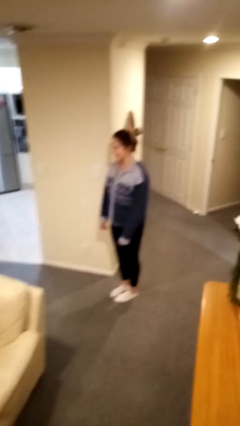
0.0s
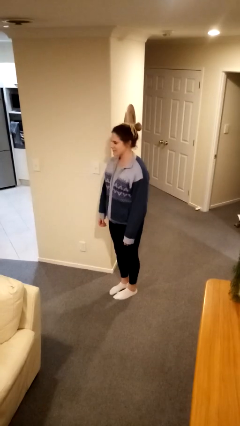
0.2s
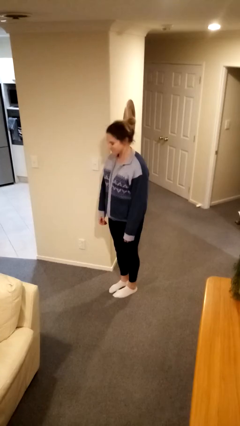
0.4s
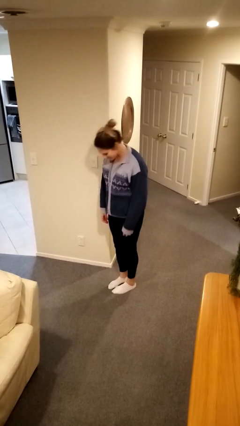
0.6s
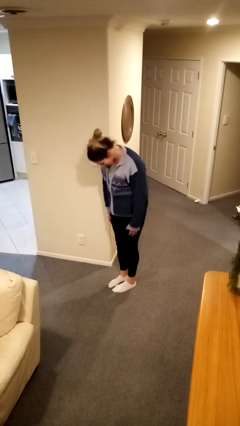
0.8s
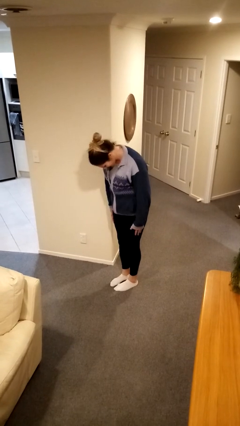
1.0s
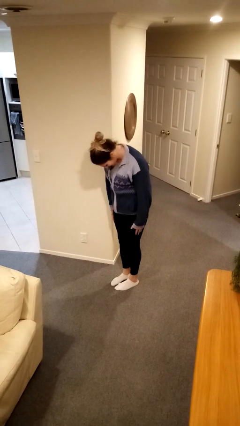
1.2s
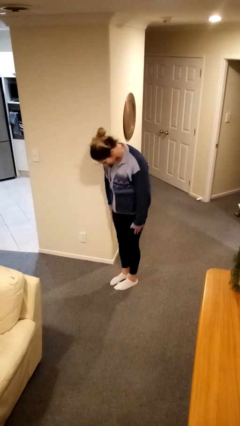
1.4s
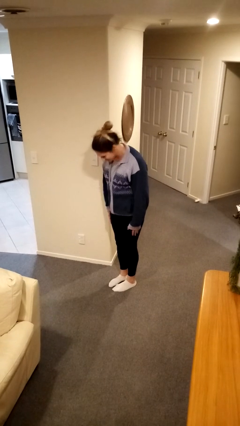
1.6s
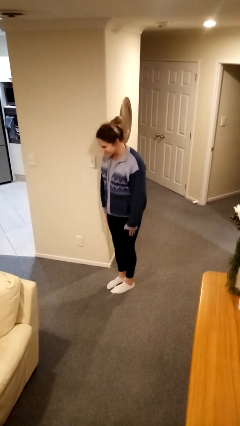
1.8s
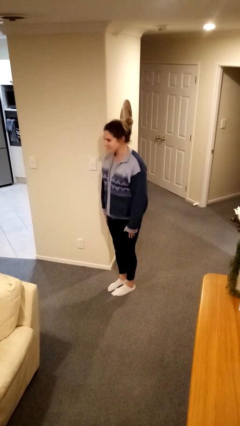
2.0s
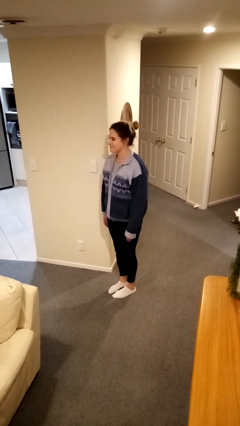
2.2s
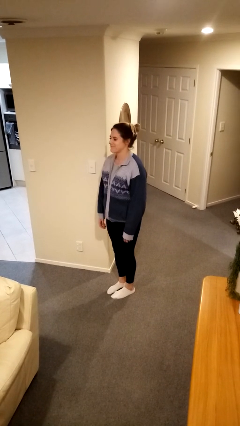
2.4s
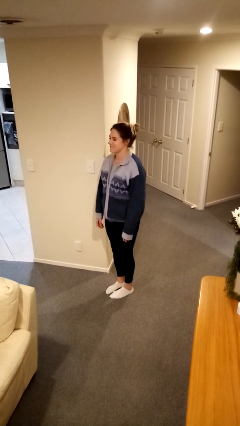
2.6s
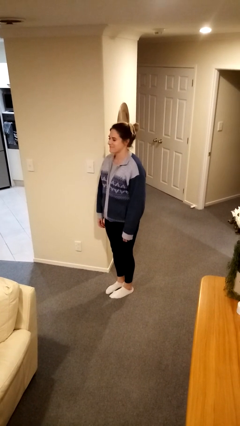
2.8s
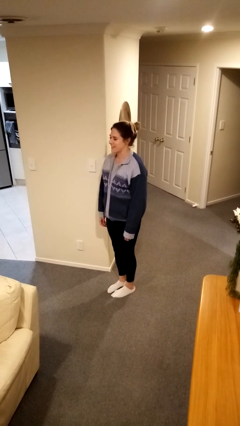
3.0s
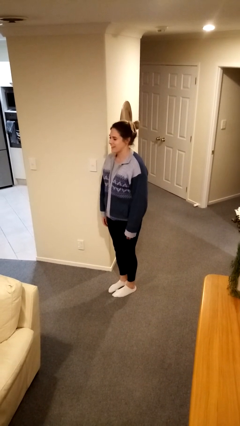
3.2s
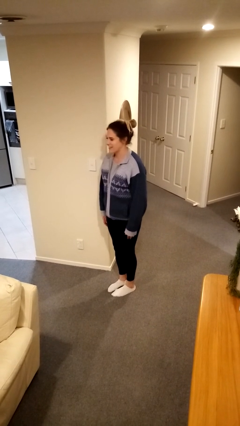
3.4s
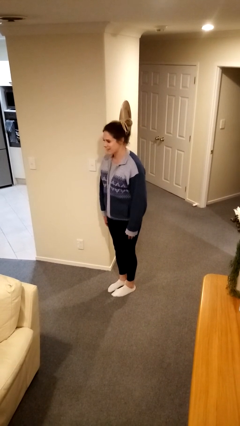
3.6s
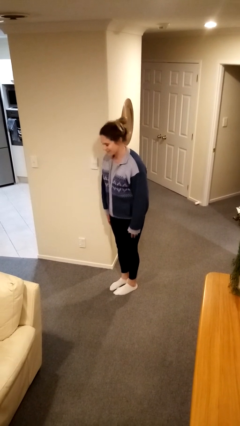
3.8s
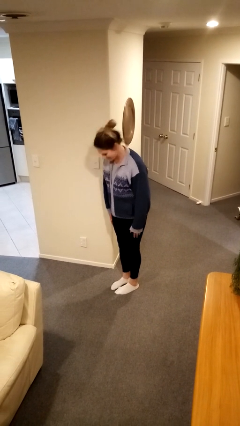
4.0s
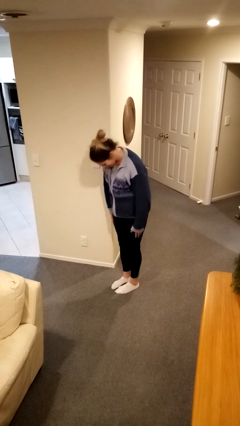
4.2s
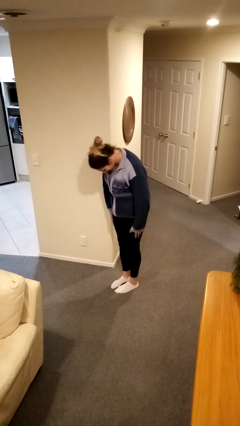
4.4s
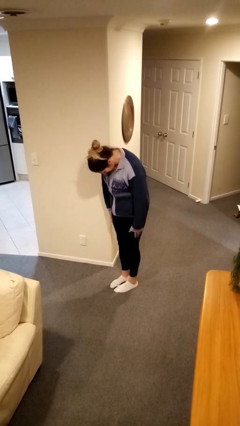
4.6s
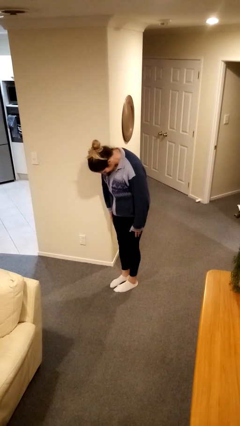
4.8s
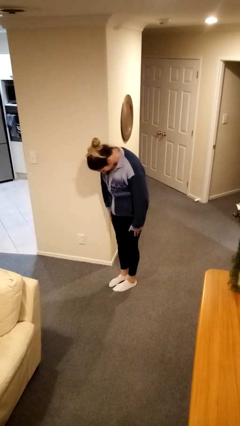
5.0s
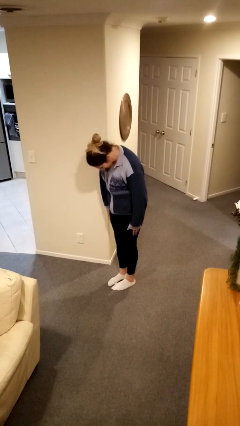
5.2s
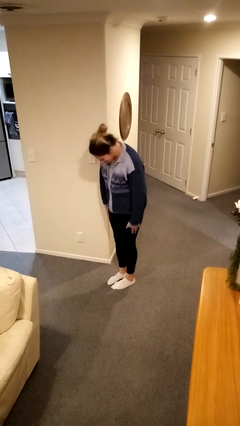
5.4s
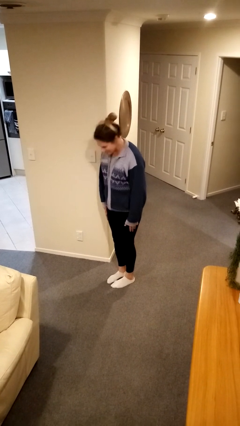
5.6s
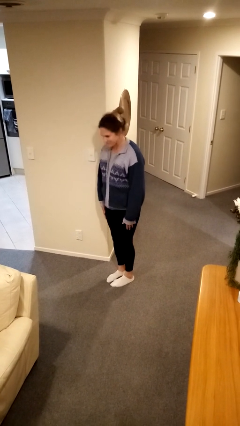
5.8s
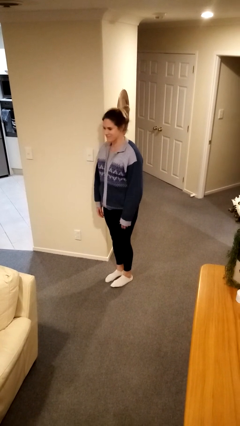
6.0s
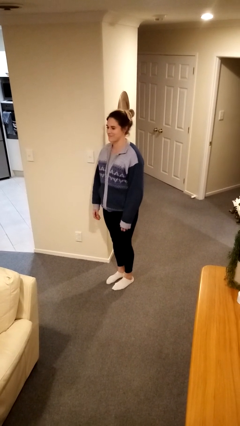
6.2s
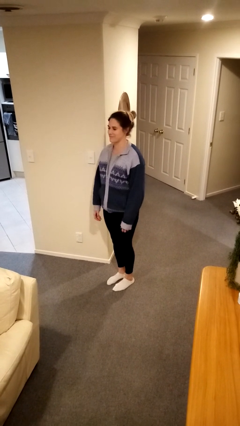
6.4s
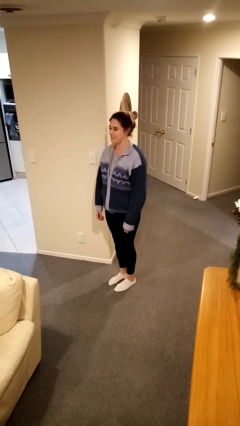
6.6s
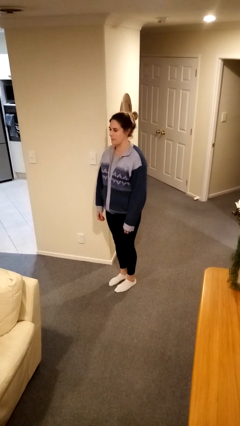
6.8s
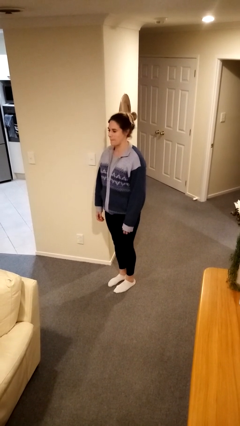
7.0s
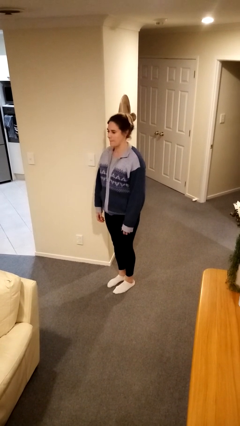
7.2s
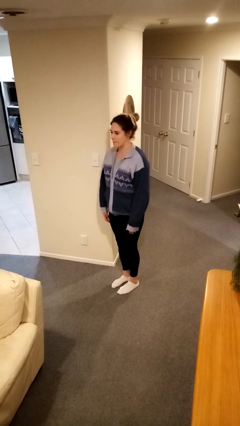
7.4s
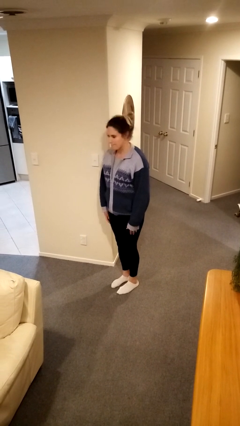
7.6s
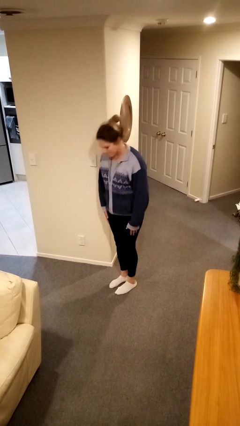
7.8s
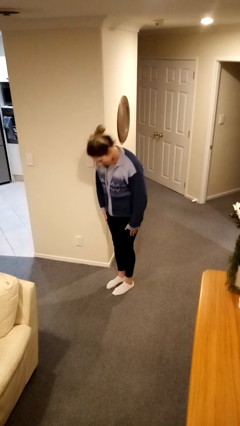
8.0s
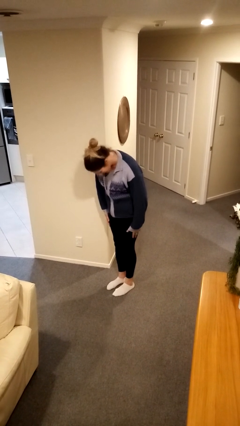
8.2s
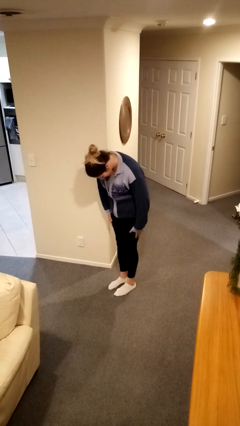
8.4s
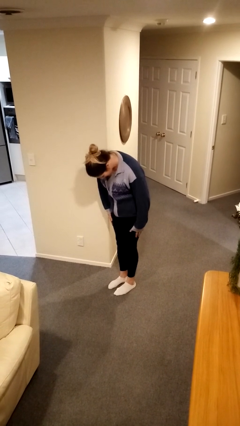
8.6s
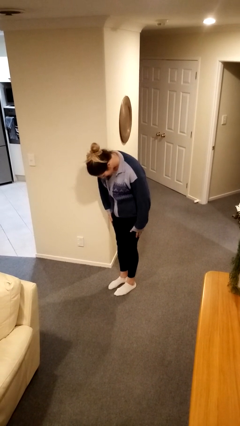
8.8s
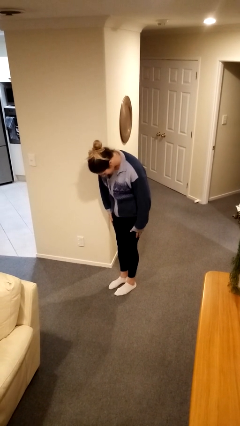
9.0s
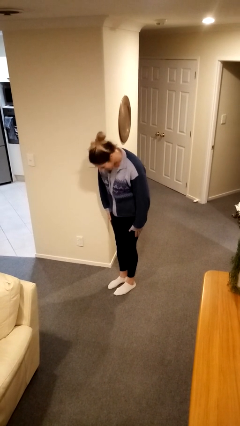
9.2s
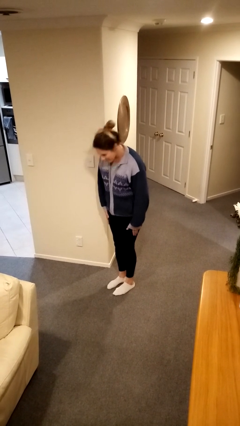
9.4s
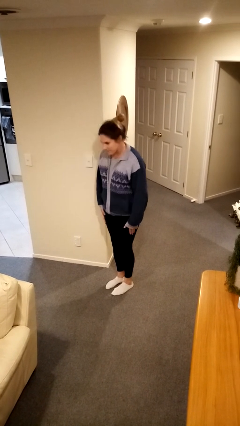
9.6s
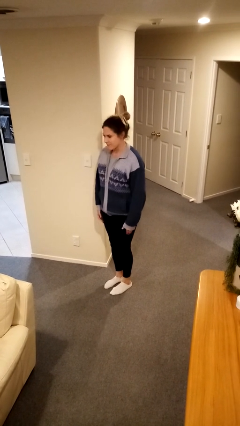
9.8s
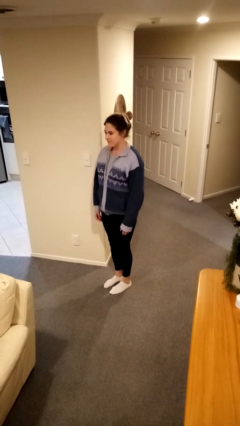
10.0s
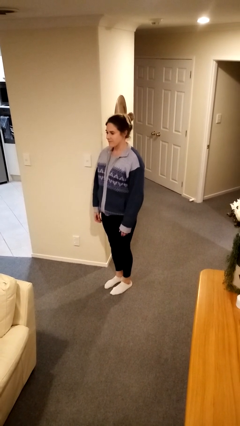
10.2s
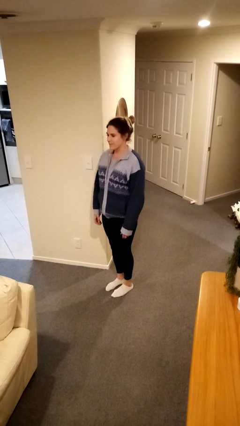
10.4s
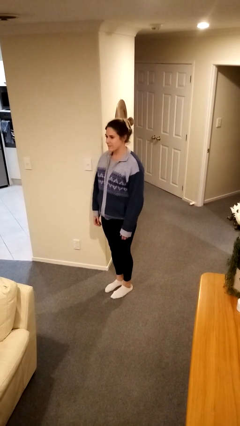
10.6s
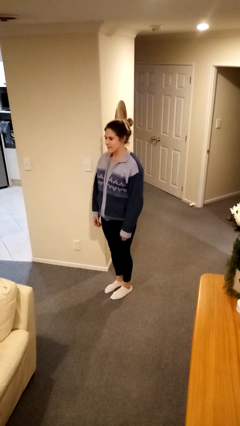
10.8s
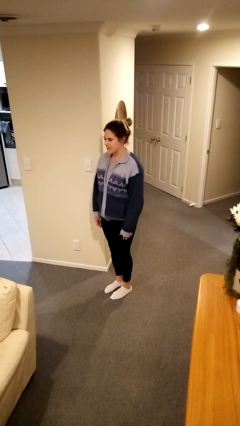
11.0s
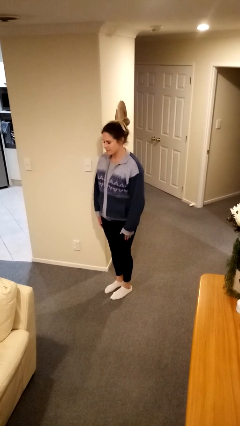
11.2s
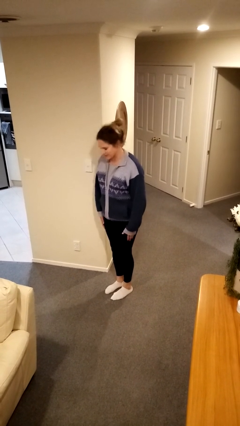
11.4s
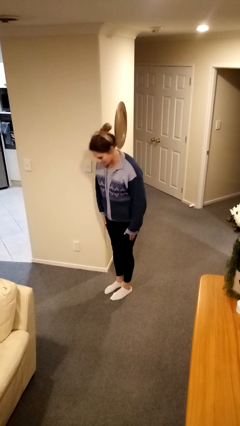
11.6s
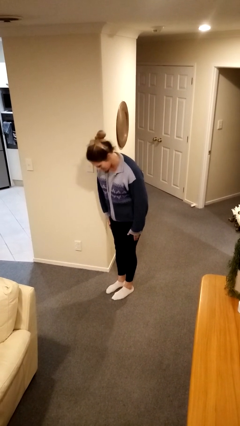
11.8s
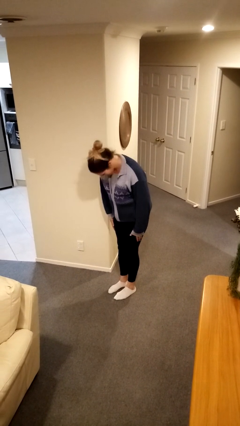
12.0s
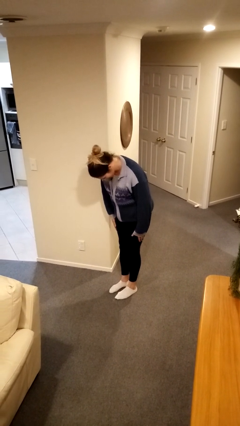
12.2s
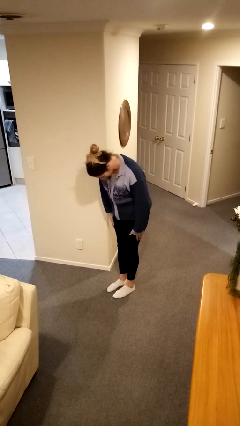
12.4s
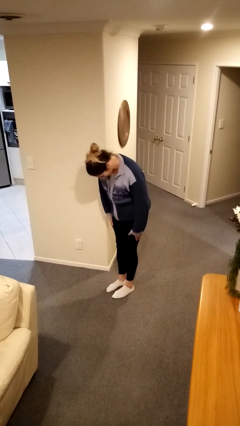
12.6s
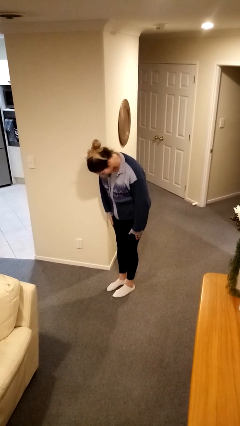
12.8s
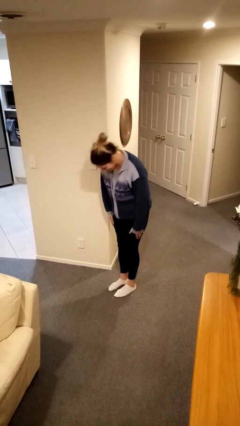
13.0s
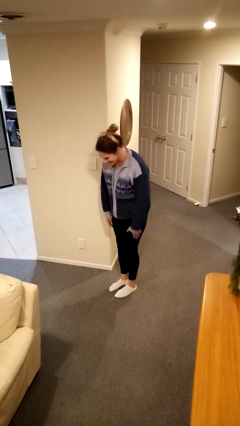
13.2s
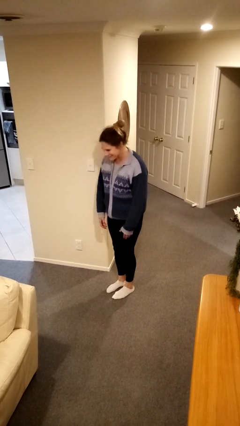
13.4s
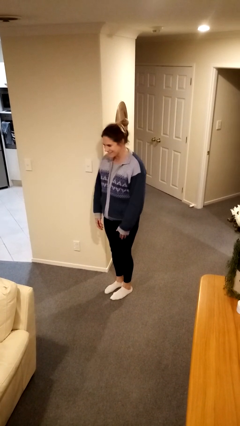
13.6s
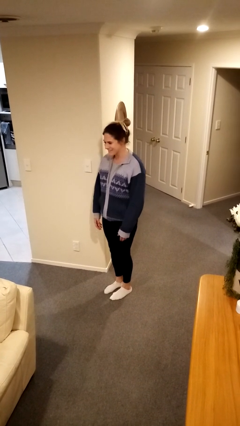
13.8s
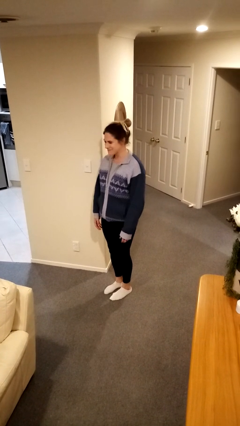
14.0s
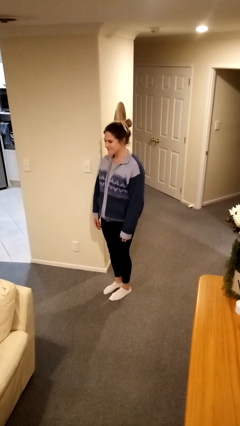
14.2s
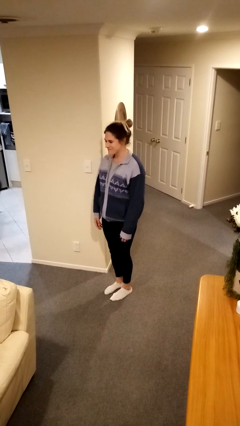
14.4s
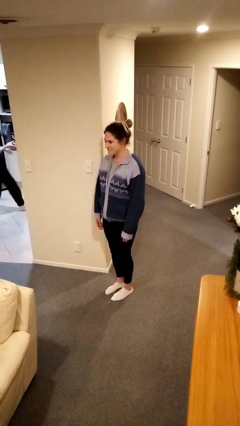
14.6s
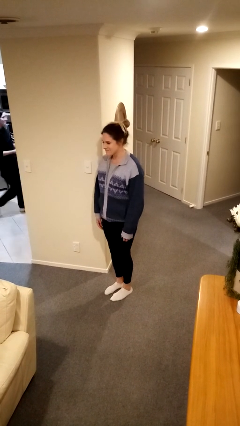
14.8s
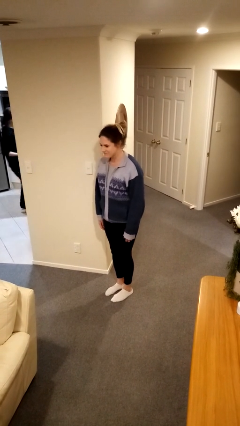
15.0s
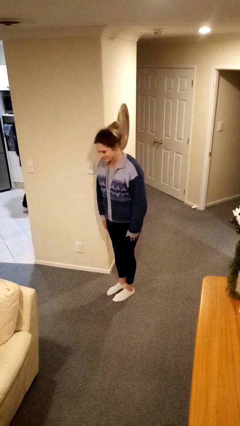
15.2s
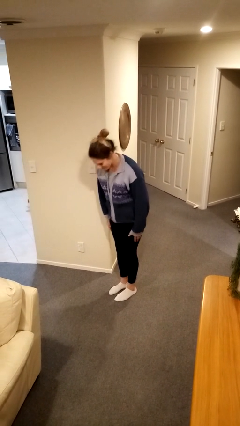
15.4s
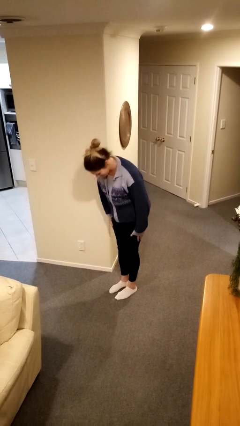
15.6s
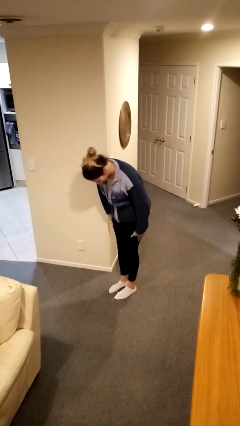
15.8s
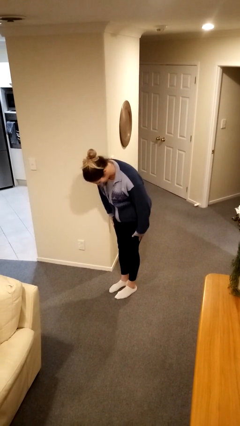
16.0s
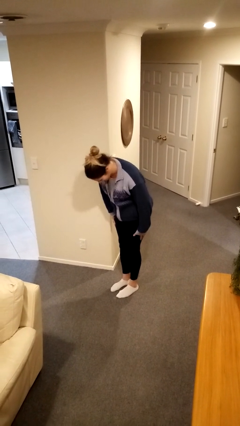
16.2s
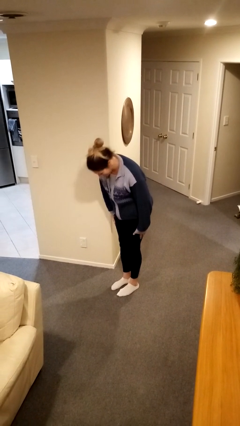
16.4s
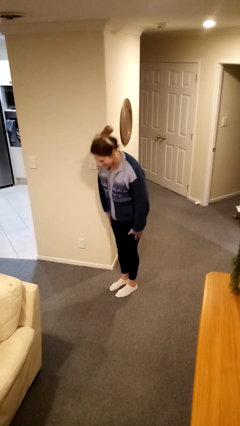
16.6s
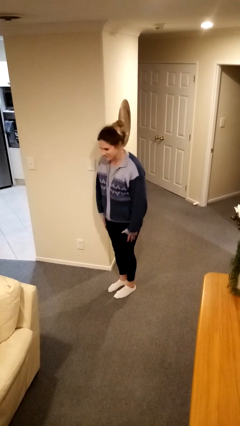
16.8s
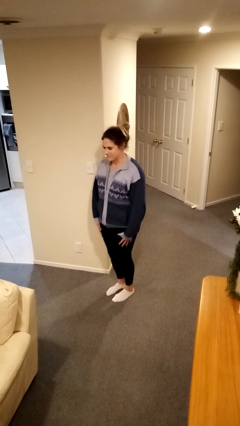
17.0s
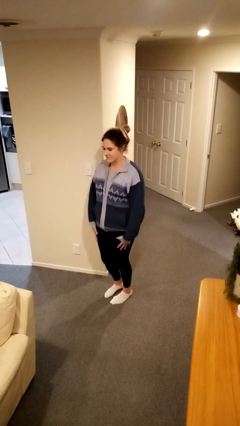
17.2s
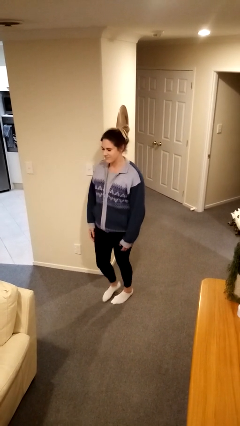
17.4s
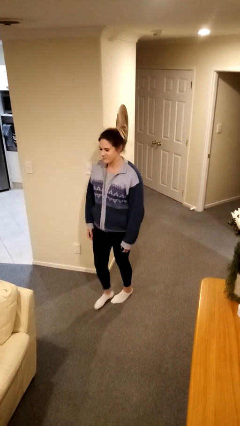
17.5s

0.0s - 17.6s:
person bows
